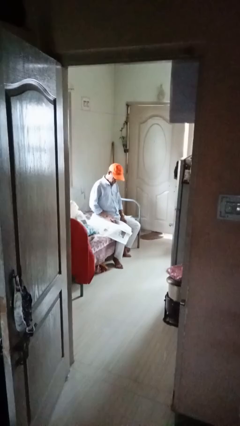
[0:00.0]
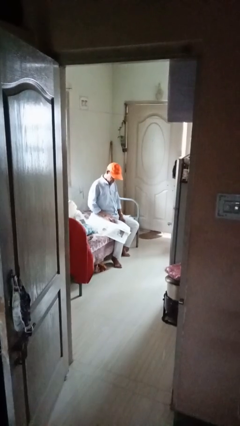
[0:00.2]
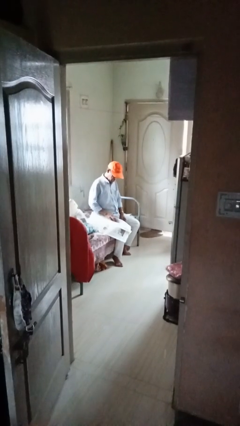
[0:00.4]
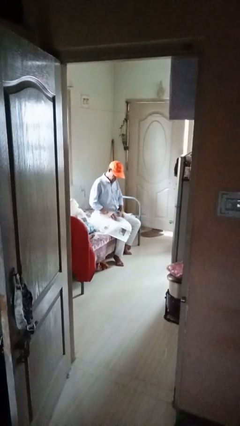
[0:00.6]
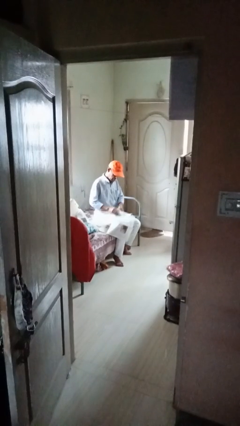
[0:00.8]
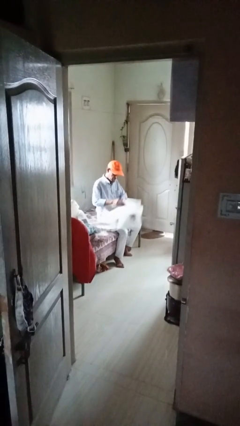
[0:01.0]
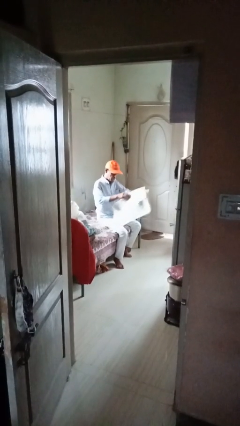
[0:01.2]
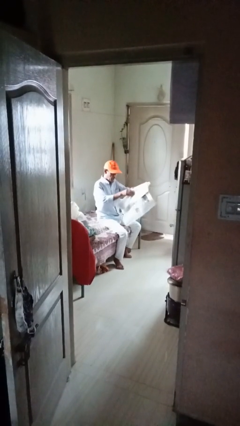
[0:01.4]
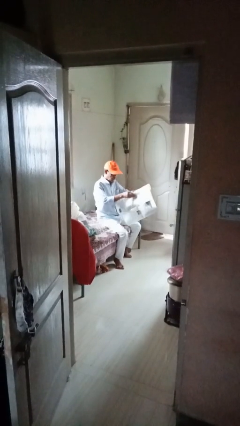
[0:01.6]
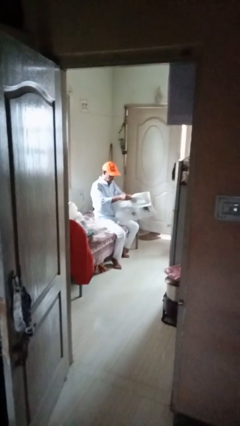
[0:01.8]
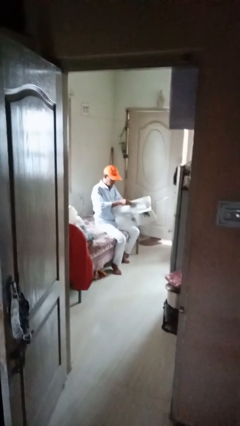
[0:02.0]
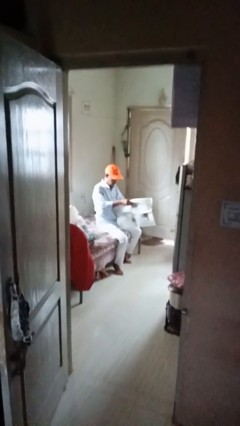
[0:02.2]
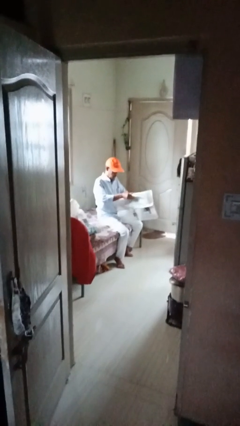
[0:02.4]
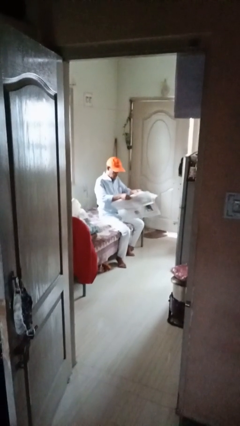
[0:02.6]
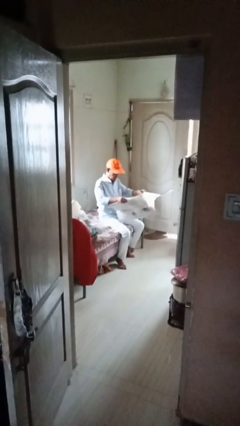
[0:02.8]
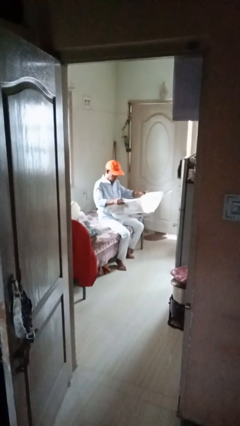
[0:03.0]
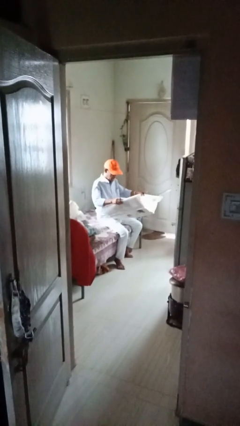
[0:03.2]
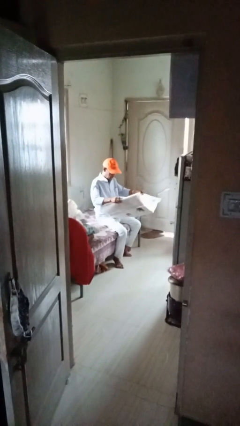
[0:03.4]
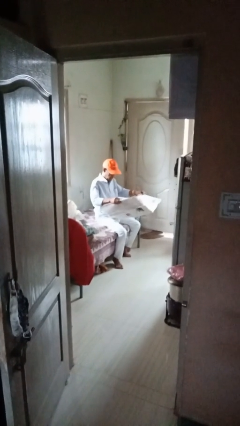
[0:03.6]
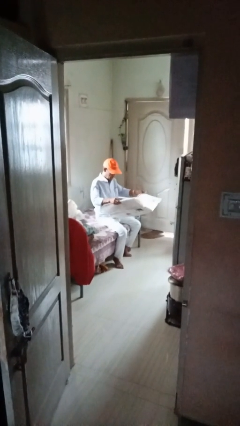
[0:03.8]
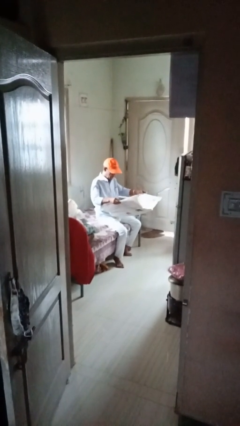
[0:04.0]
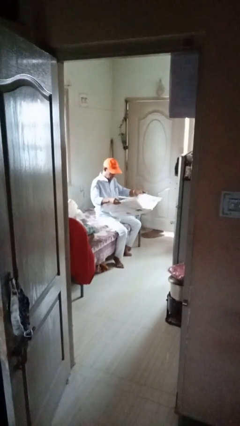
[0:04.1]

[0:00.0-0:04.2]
person reads newspaper

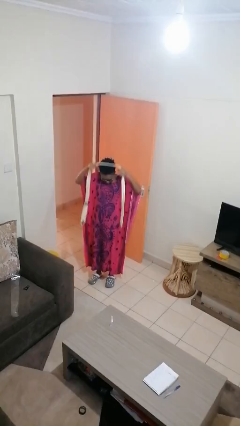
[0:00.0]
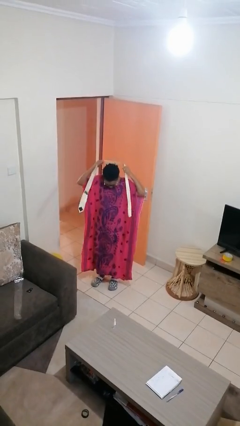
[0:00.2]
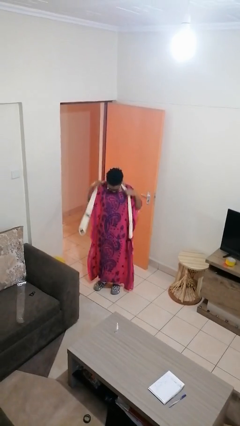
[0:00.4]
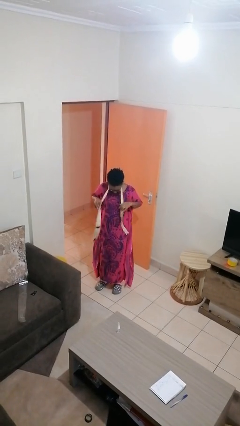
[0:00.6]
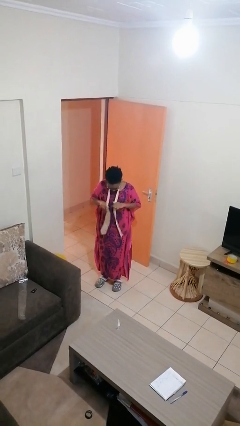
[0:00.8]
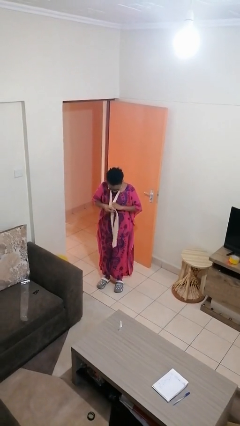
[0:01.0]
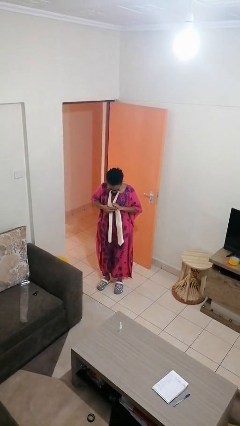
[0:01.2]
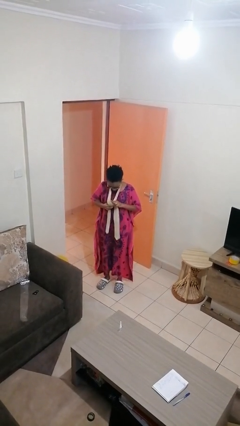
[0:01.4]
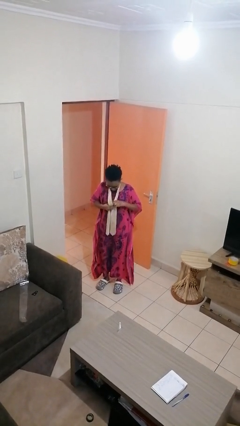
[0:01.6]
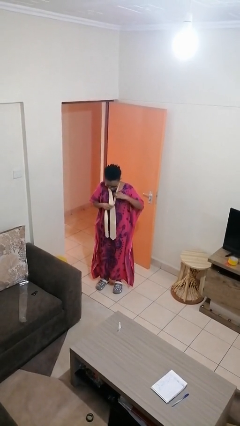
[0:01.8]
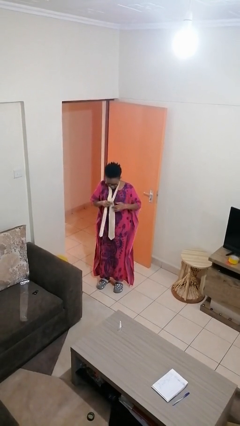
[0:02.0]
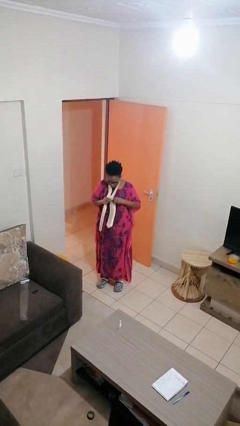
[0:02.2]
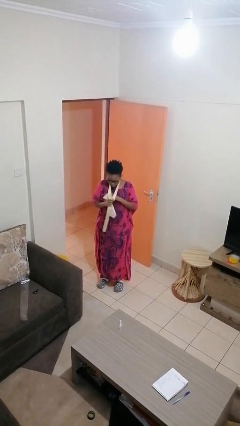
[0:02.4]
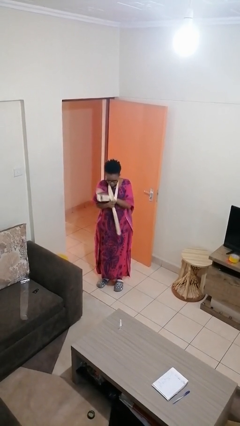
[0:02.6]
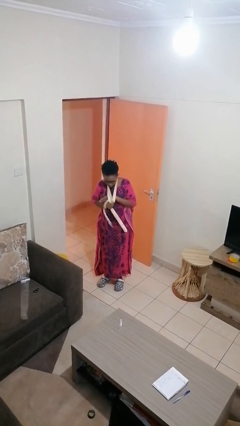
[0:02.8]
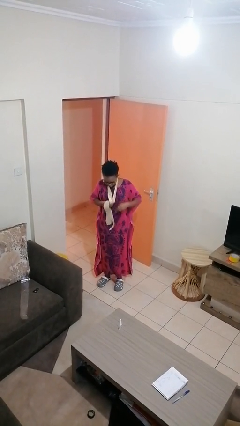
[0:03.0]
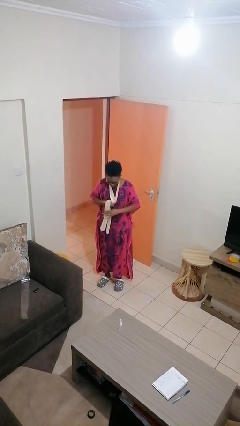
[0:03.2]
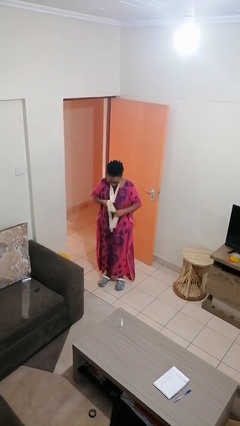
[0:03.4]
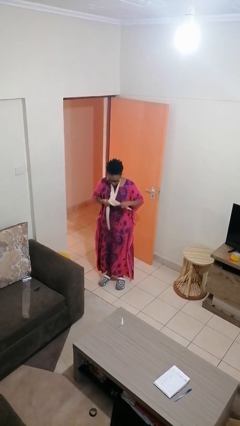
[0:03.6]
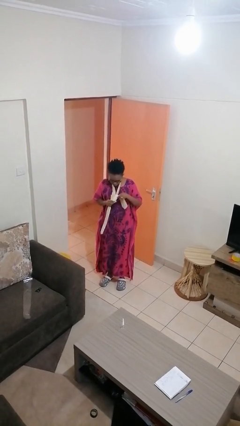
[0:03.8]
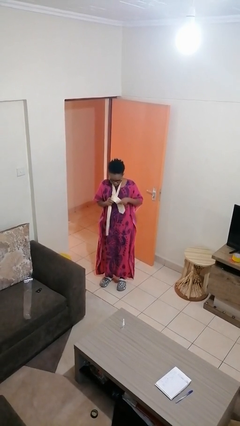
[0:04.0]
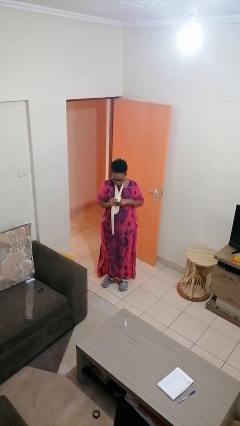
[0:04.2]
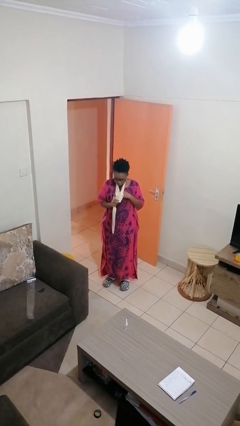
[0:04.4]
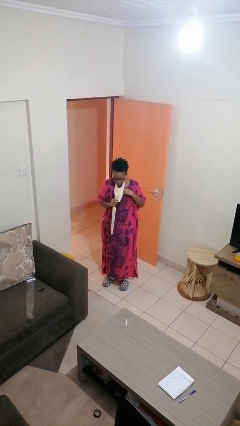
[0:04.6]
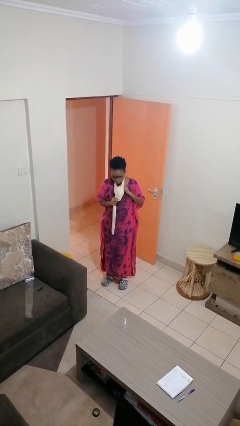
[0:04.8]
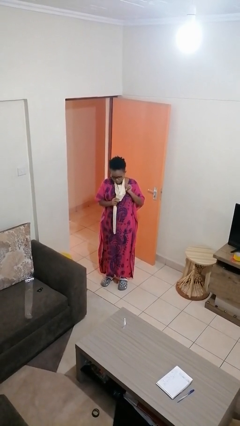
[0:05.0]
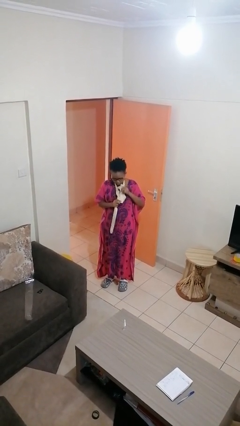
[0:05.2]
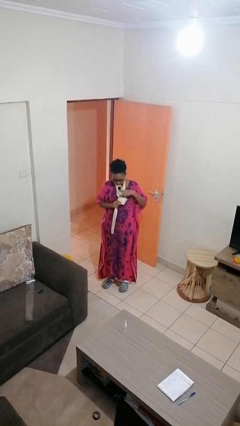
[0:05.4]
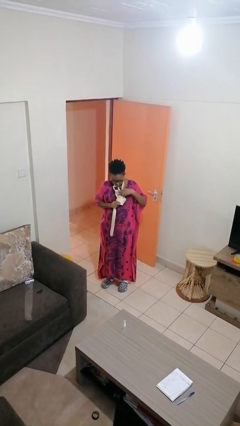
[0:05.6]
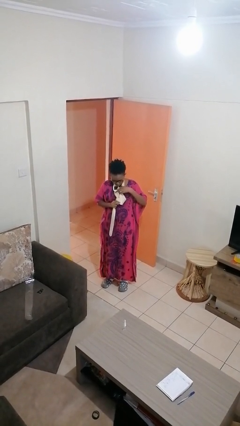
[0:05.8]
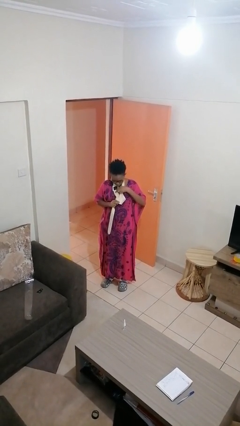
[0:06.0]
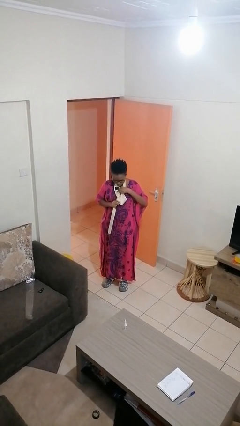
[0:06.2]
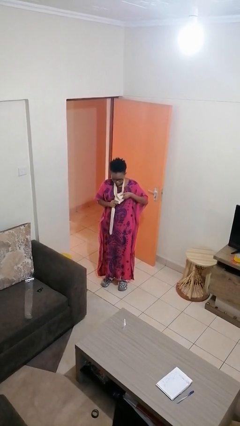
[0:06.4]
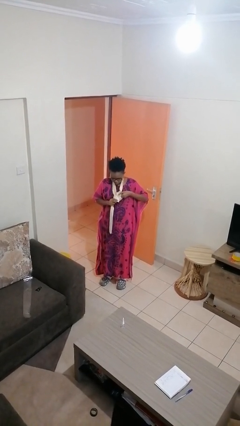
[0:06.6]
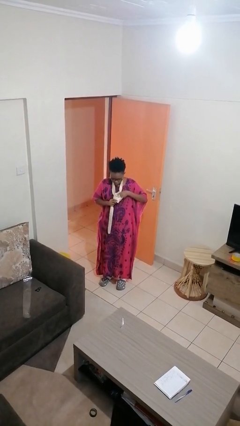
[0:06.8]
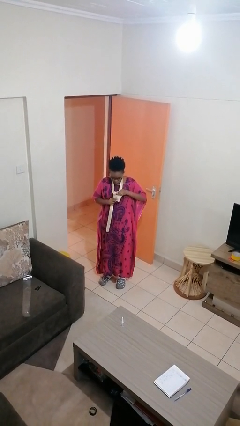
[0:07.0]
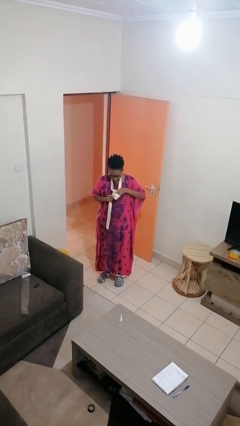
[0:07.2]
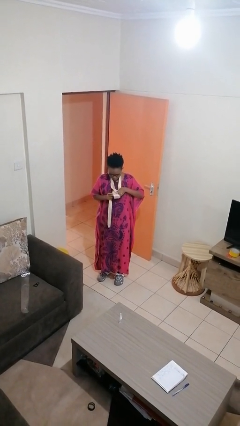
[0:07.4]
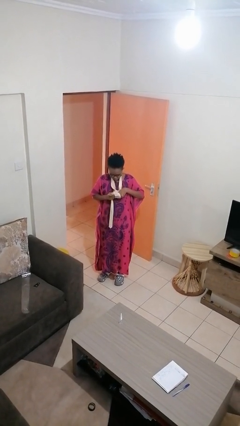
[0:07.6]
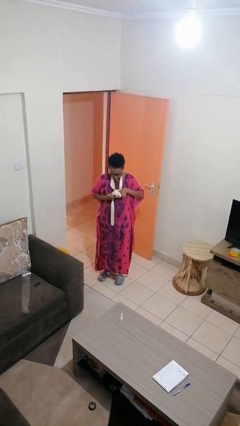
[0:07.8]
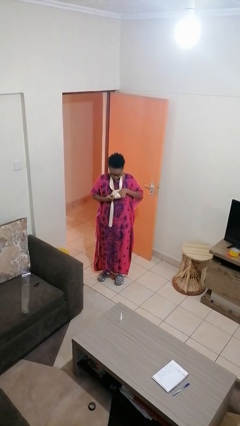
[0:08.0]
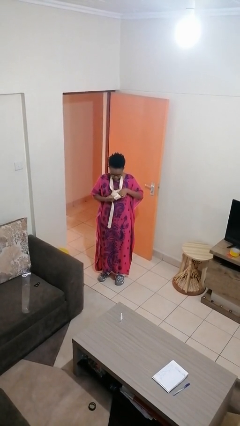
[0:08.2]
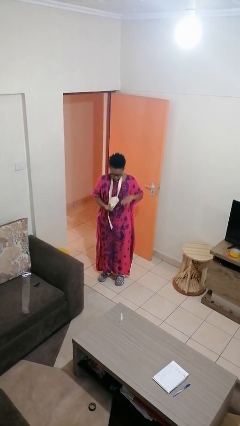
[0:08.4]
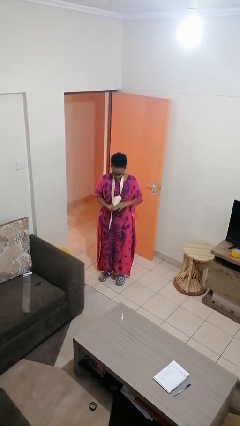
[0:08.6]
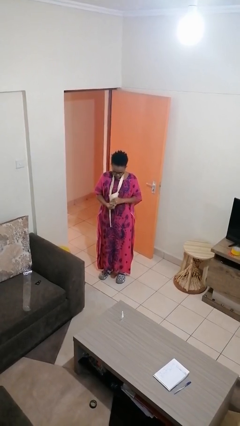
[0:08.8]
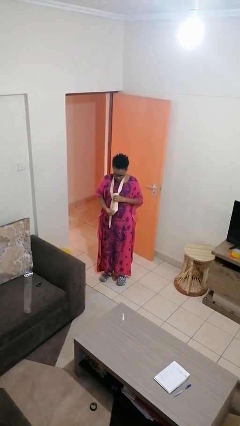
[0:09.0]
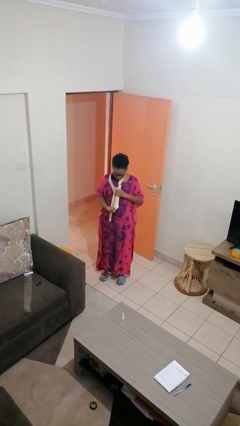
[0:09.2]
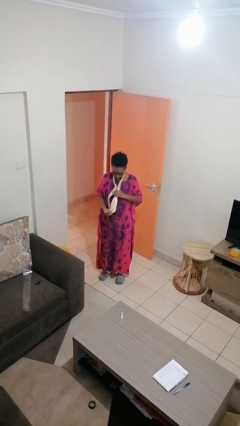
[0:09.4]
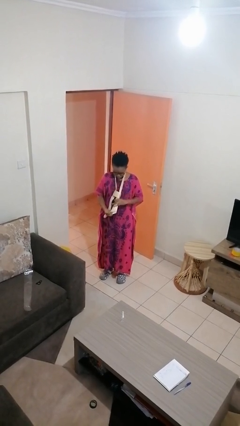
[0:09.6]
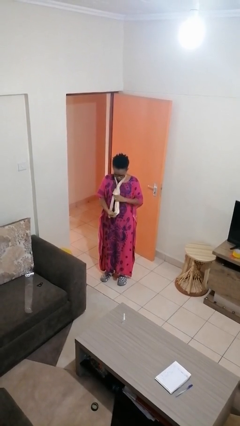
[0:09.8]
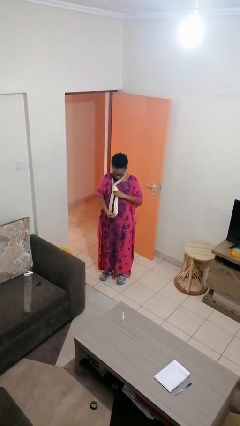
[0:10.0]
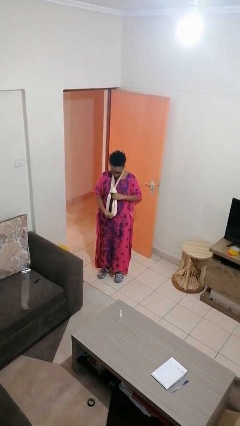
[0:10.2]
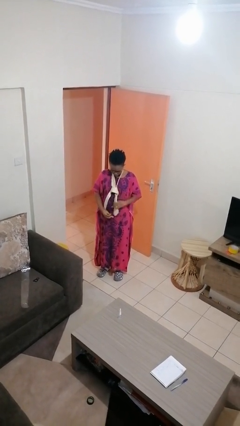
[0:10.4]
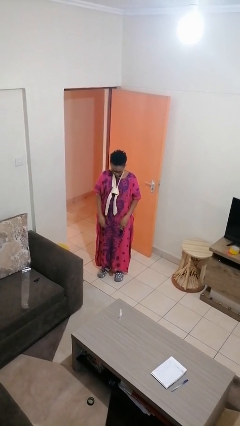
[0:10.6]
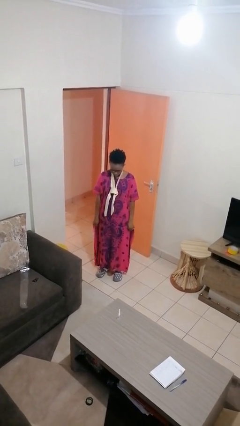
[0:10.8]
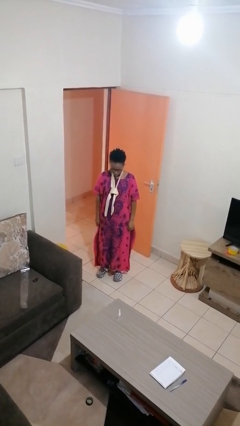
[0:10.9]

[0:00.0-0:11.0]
person puts on necktie

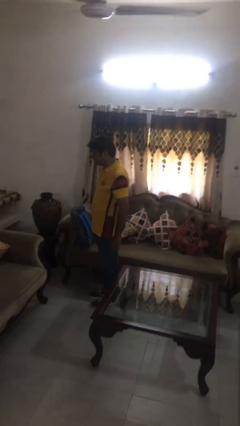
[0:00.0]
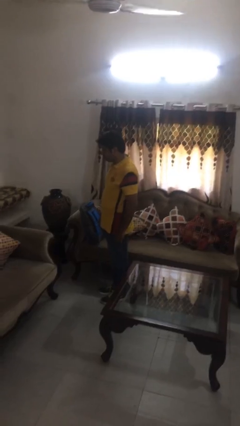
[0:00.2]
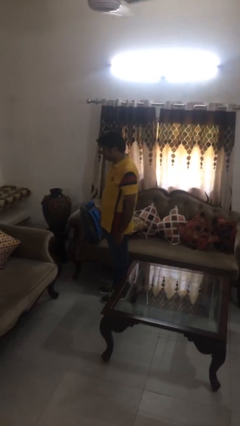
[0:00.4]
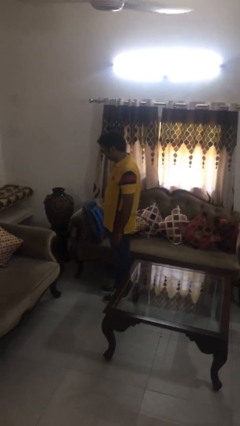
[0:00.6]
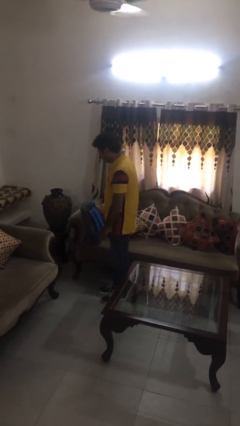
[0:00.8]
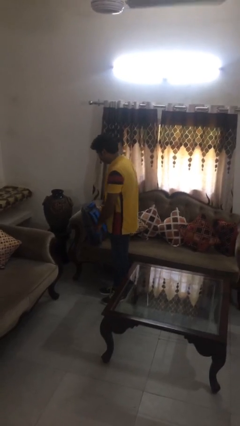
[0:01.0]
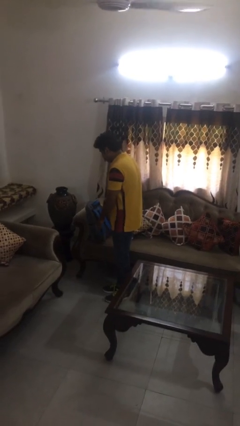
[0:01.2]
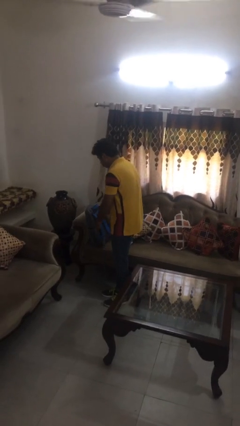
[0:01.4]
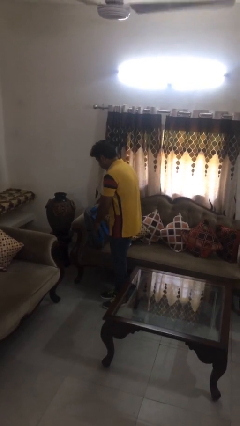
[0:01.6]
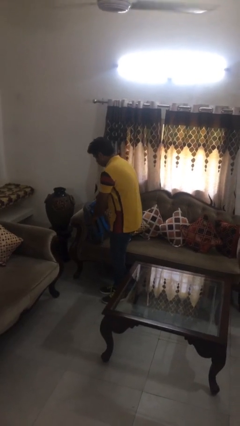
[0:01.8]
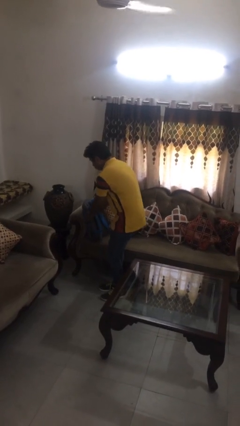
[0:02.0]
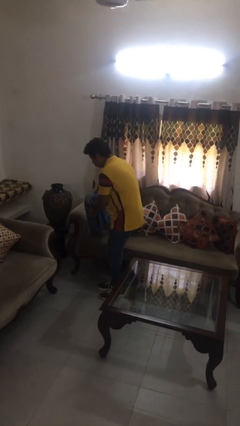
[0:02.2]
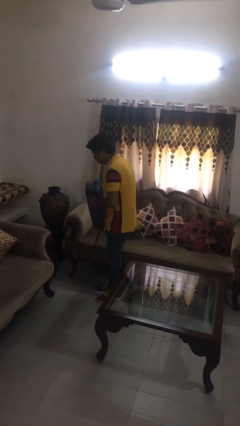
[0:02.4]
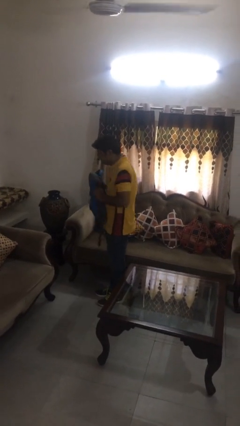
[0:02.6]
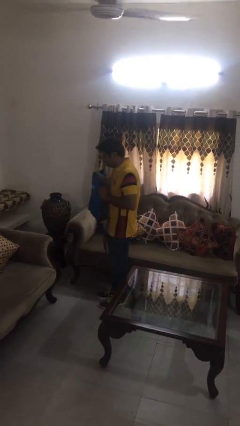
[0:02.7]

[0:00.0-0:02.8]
person picks up object from couch
